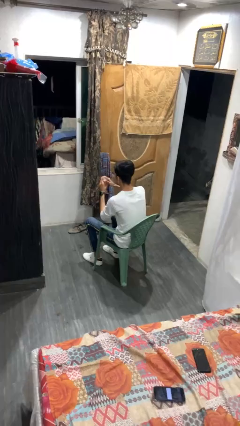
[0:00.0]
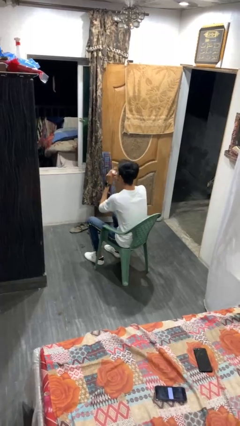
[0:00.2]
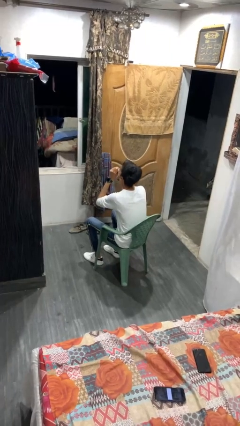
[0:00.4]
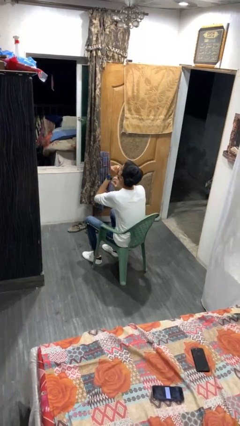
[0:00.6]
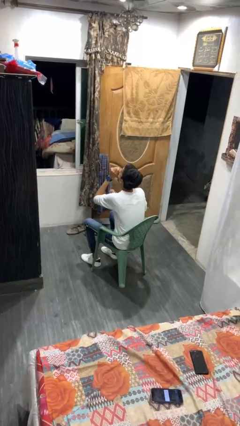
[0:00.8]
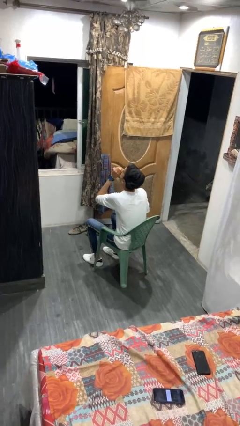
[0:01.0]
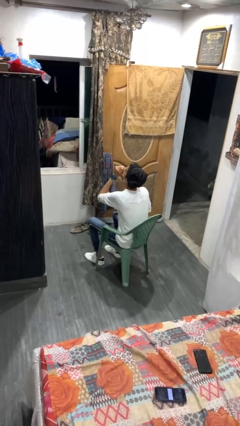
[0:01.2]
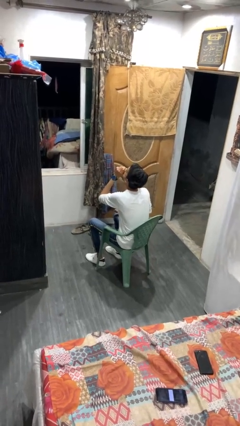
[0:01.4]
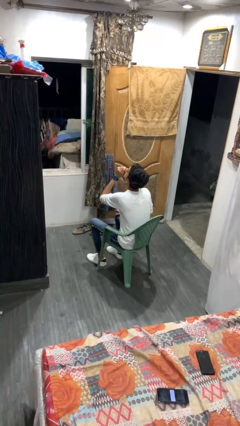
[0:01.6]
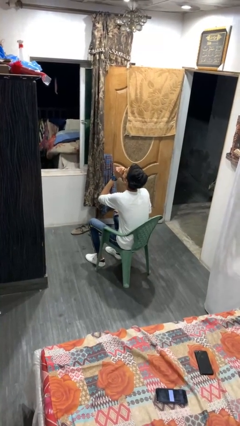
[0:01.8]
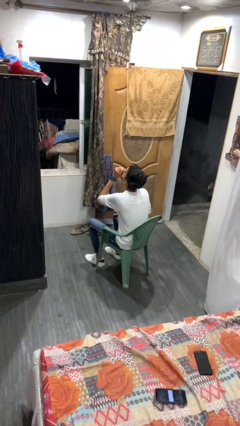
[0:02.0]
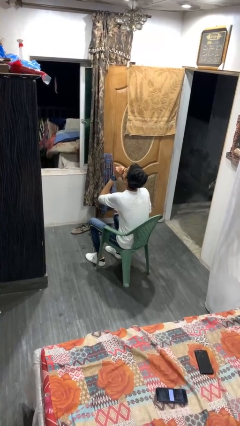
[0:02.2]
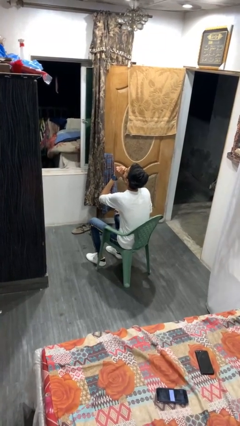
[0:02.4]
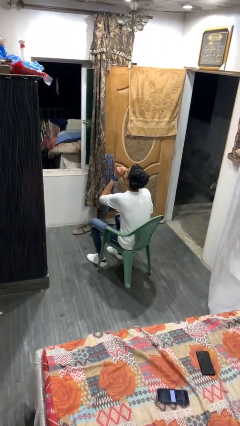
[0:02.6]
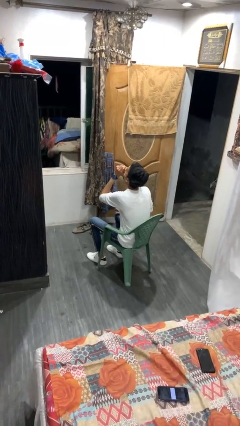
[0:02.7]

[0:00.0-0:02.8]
person drinks from beverage can

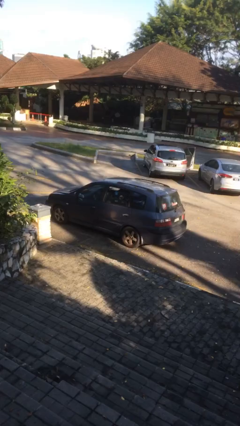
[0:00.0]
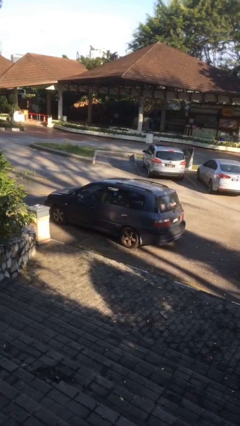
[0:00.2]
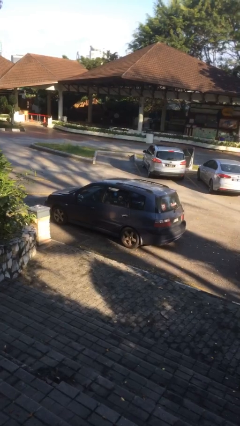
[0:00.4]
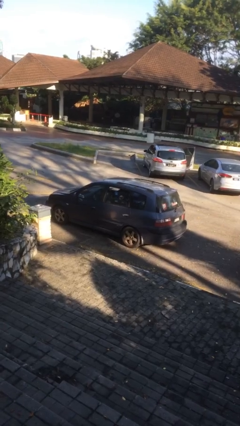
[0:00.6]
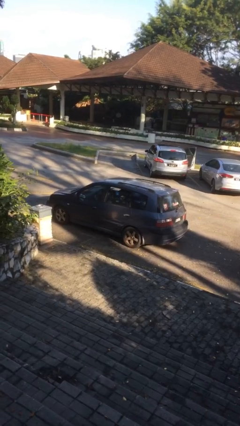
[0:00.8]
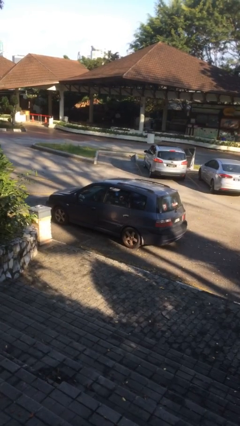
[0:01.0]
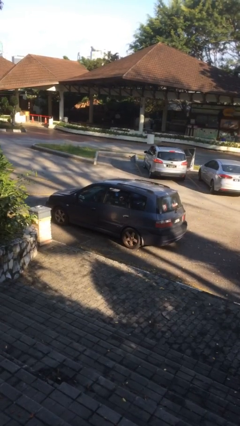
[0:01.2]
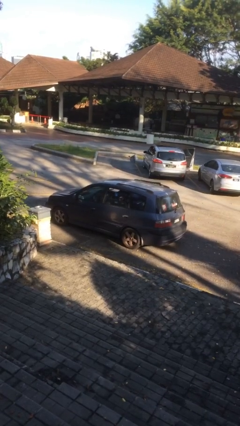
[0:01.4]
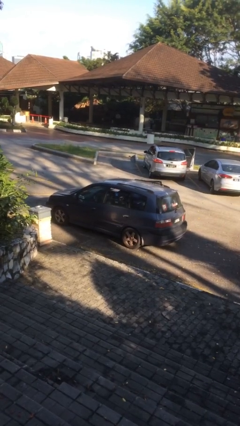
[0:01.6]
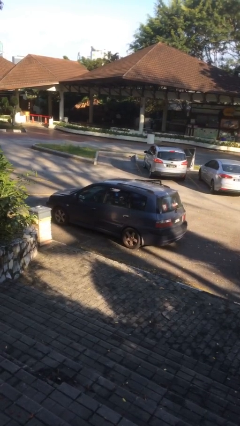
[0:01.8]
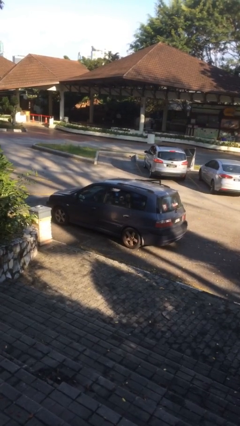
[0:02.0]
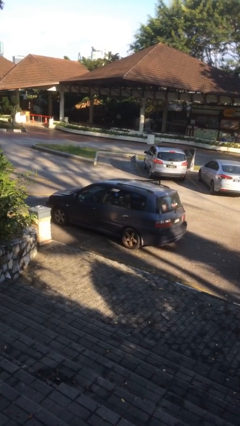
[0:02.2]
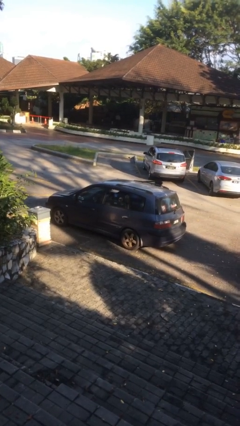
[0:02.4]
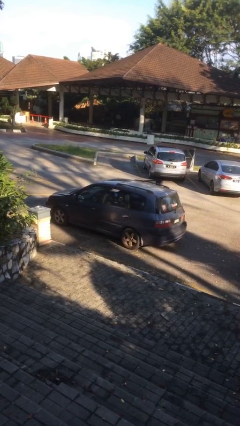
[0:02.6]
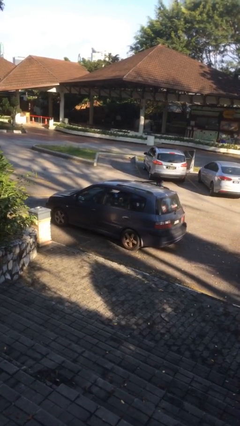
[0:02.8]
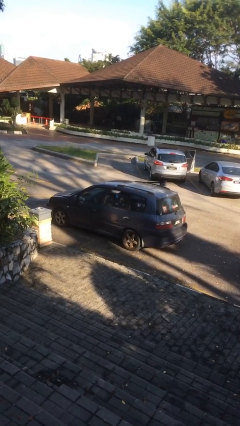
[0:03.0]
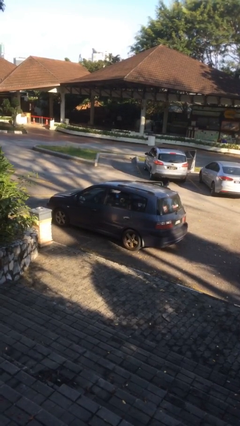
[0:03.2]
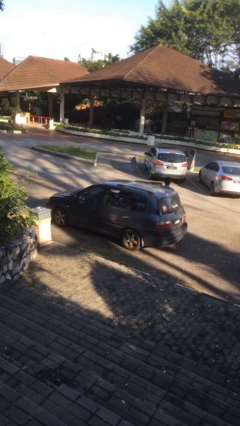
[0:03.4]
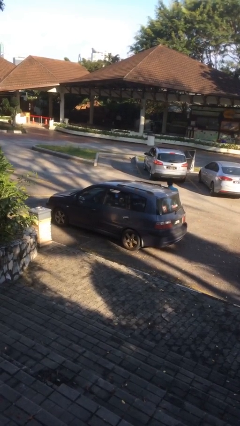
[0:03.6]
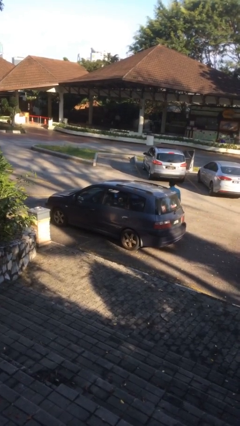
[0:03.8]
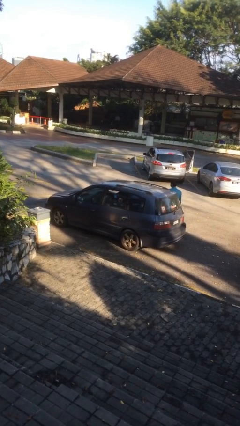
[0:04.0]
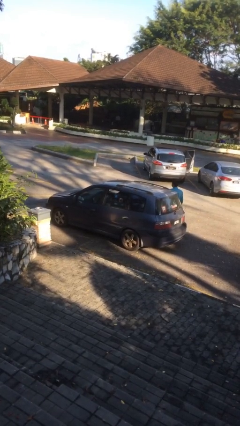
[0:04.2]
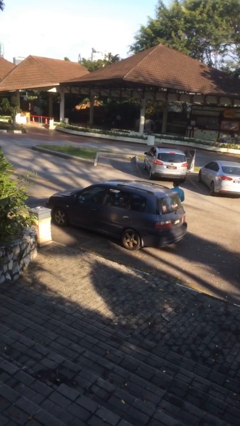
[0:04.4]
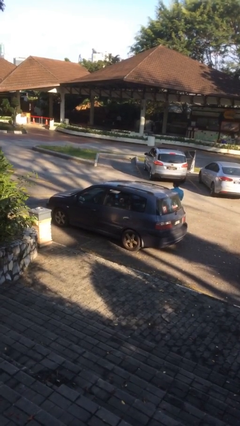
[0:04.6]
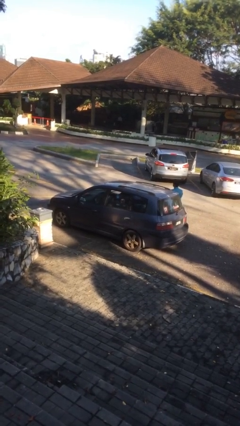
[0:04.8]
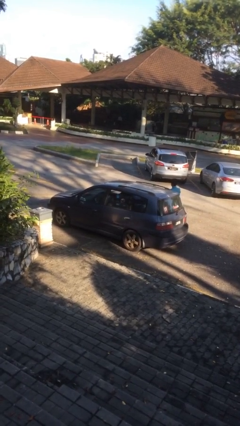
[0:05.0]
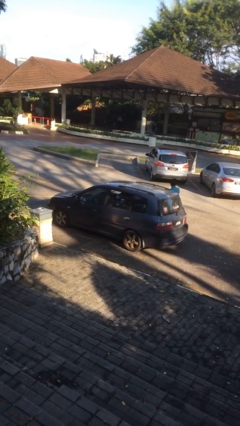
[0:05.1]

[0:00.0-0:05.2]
car drops off person

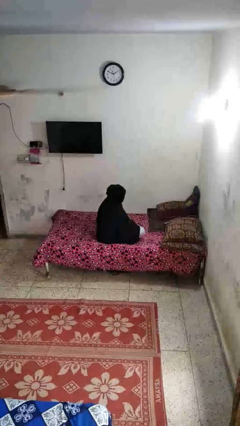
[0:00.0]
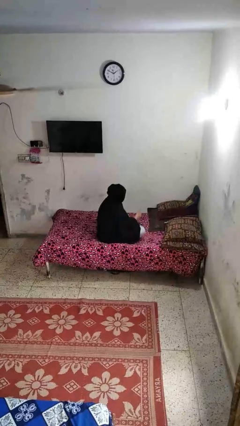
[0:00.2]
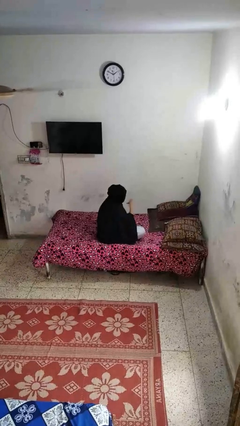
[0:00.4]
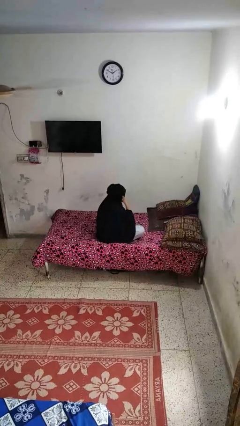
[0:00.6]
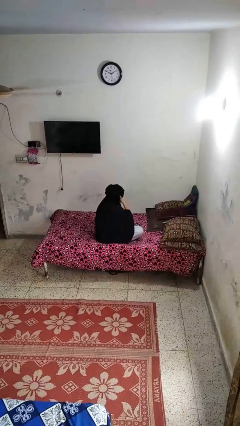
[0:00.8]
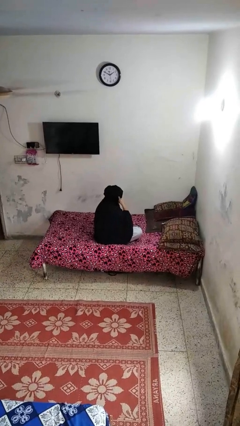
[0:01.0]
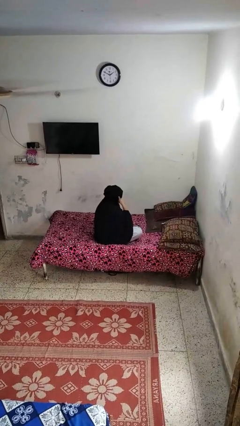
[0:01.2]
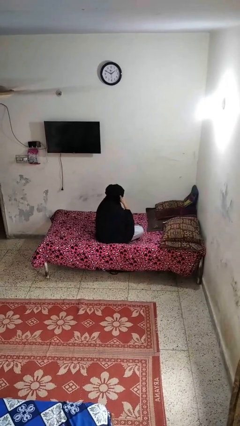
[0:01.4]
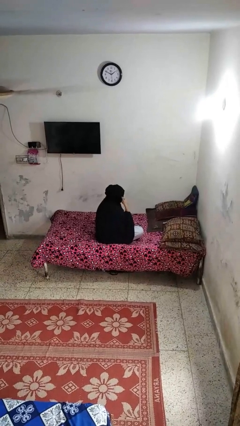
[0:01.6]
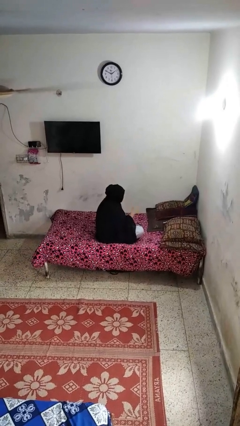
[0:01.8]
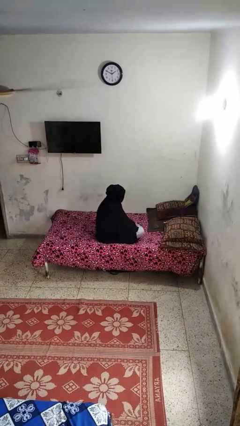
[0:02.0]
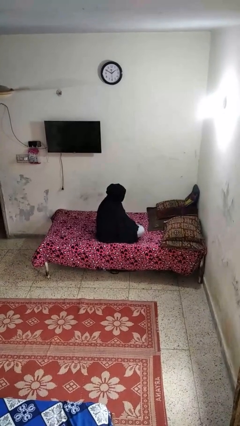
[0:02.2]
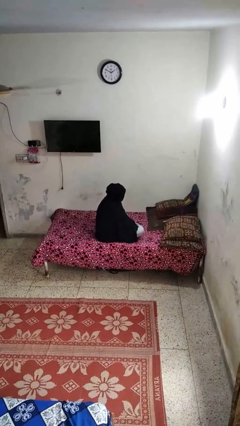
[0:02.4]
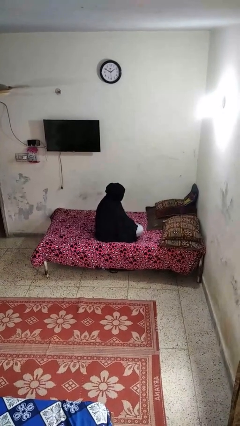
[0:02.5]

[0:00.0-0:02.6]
person gestures call me

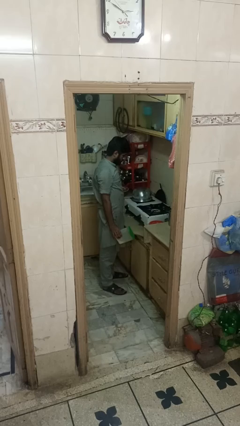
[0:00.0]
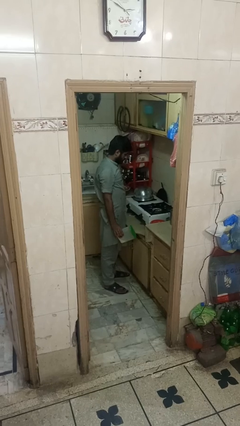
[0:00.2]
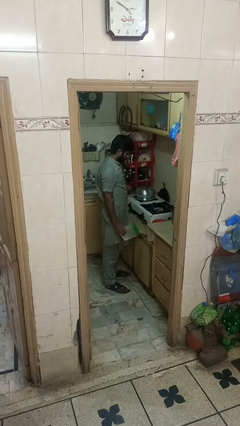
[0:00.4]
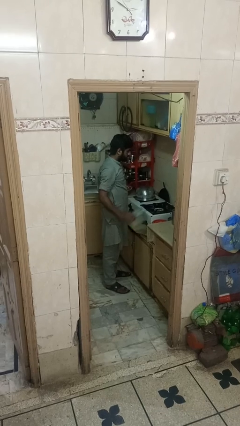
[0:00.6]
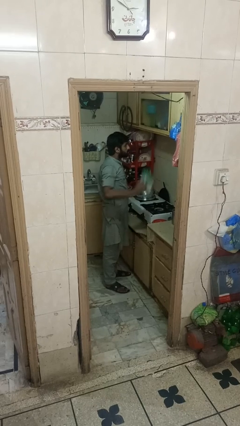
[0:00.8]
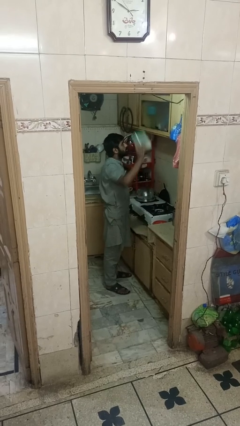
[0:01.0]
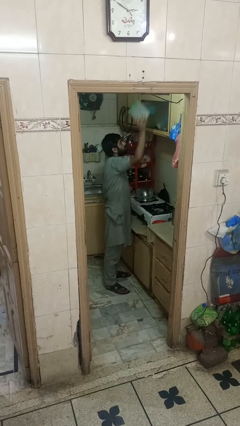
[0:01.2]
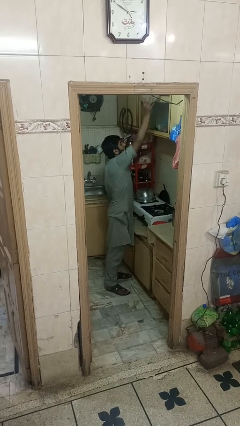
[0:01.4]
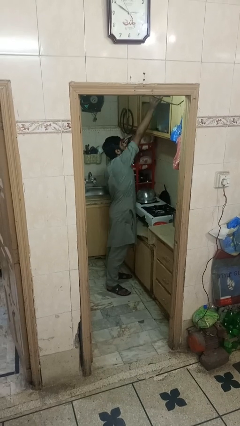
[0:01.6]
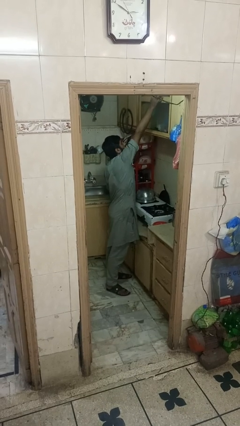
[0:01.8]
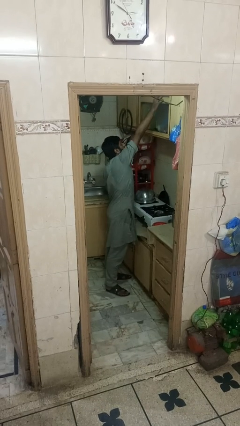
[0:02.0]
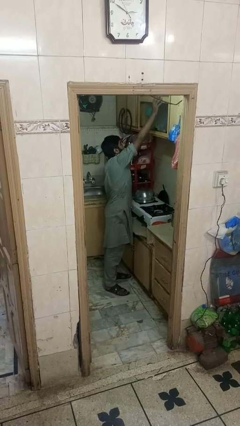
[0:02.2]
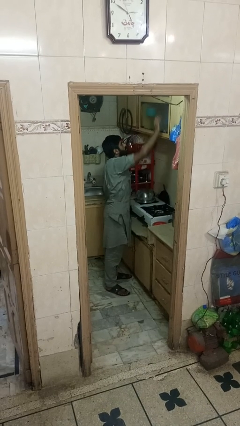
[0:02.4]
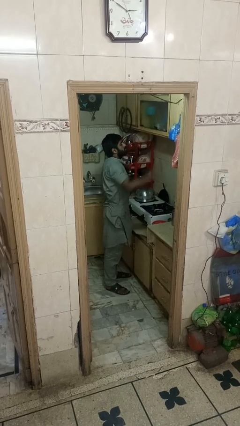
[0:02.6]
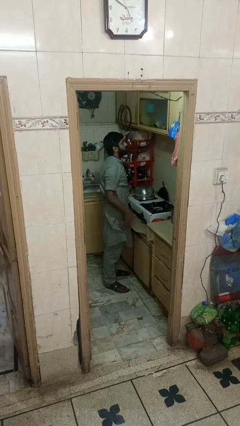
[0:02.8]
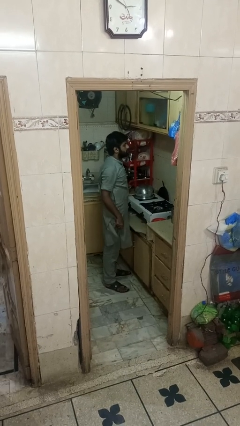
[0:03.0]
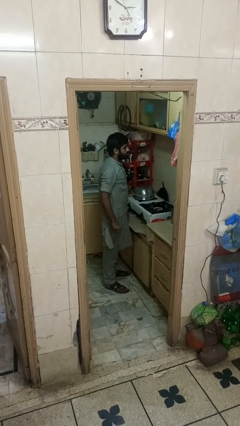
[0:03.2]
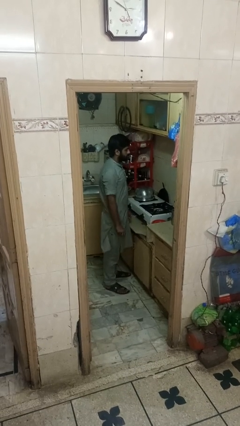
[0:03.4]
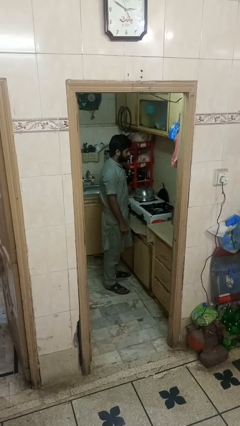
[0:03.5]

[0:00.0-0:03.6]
person puts down object on shelf

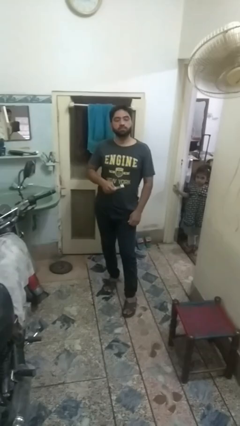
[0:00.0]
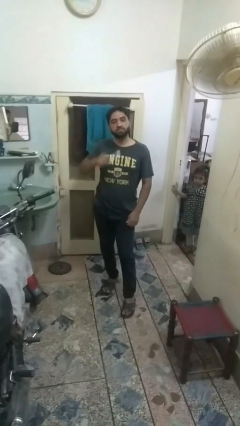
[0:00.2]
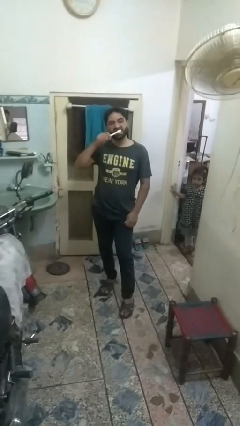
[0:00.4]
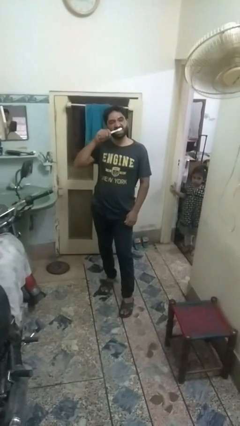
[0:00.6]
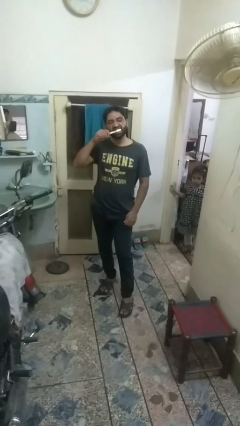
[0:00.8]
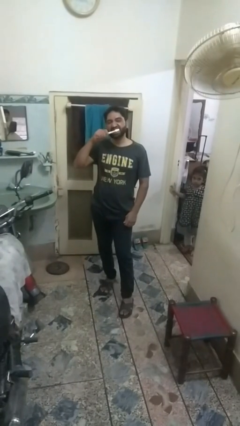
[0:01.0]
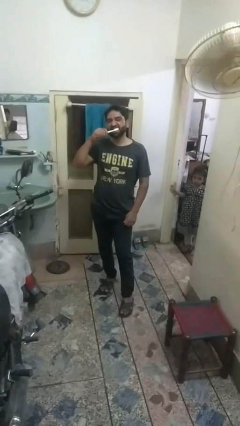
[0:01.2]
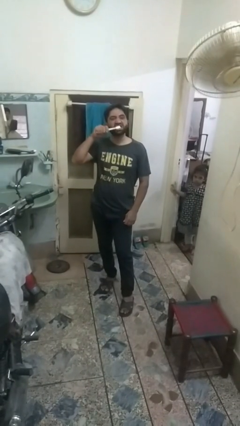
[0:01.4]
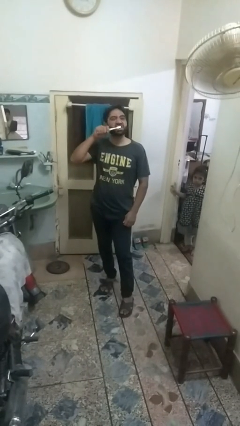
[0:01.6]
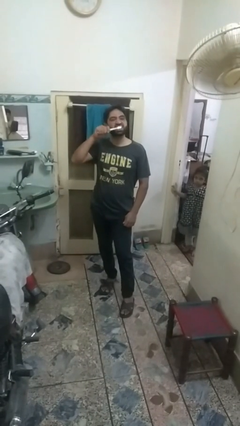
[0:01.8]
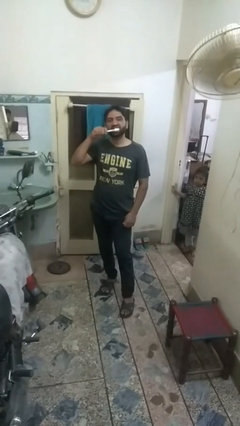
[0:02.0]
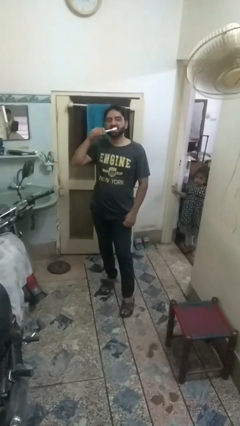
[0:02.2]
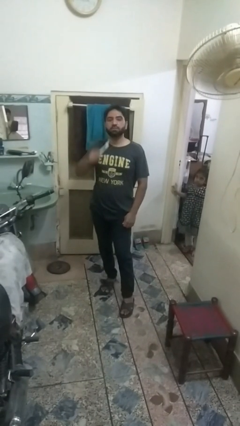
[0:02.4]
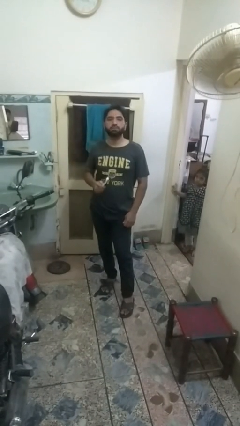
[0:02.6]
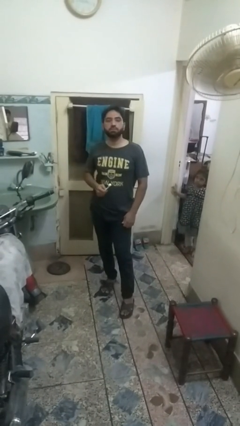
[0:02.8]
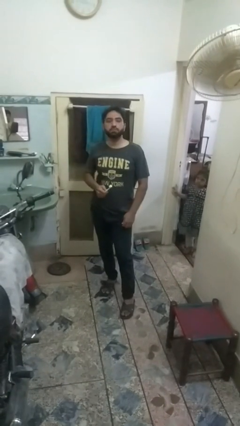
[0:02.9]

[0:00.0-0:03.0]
person brushes teeth

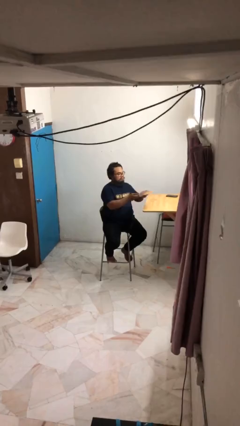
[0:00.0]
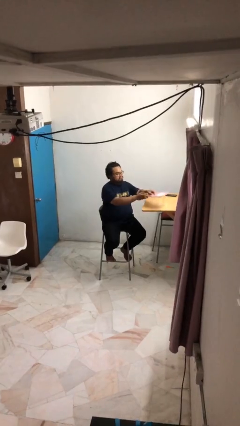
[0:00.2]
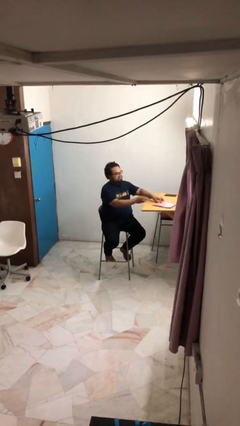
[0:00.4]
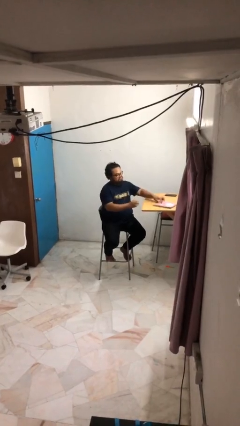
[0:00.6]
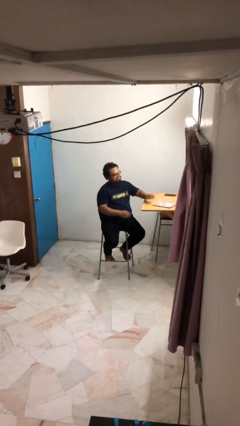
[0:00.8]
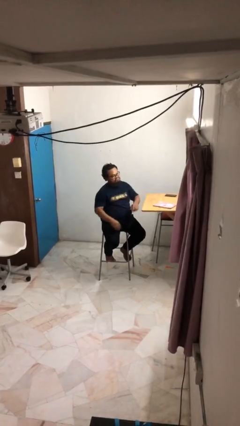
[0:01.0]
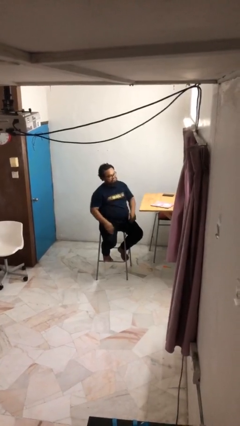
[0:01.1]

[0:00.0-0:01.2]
person puts down object on table
